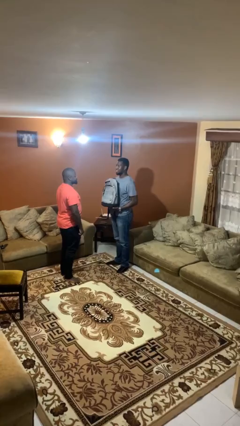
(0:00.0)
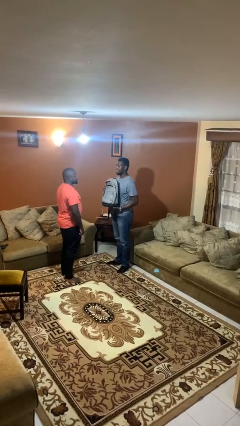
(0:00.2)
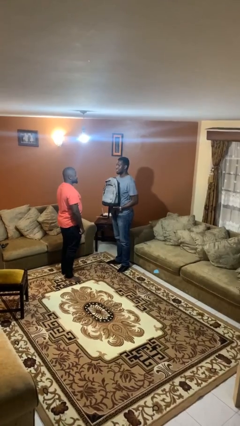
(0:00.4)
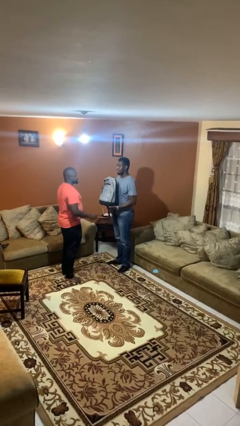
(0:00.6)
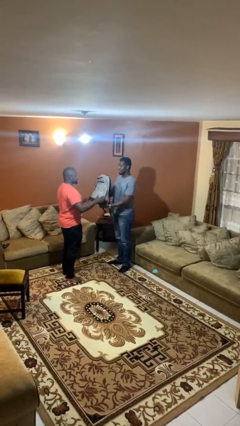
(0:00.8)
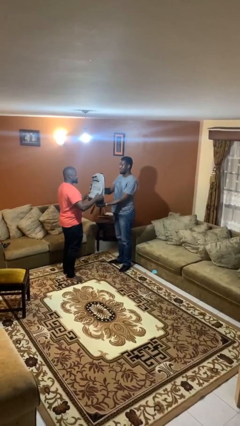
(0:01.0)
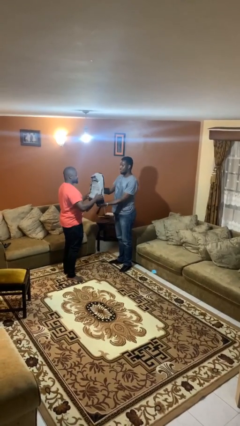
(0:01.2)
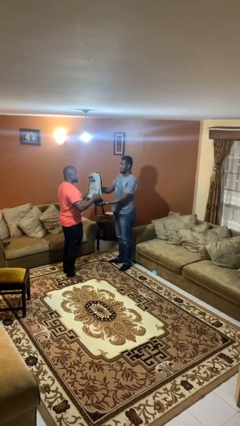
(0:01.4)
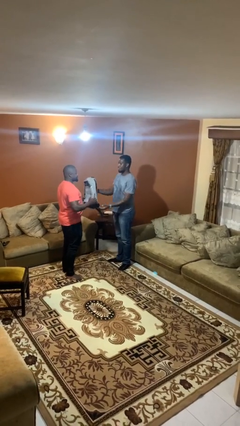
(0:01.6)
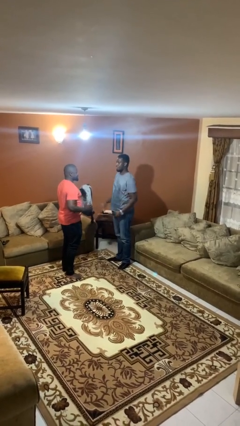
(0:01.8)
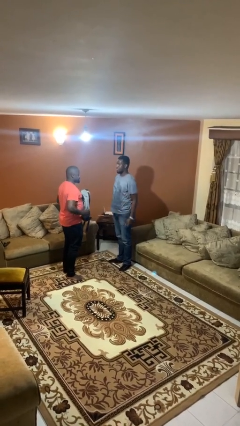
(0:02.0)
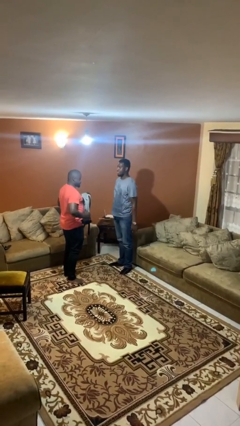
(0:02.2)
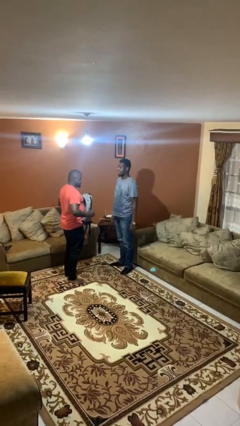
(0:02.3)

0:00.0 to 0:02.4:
person transfers object to person

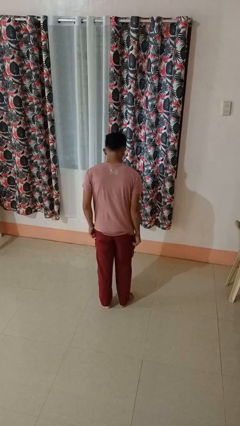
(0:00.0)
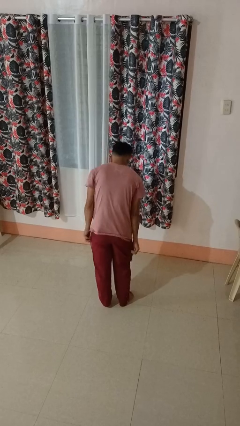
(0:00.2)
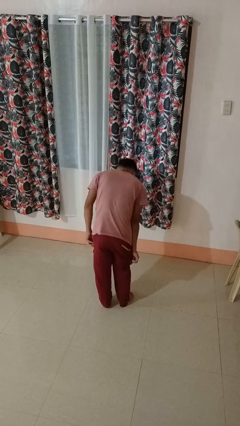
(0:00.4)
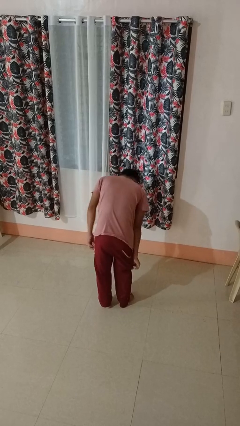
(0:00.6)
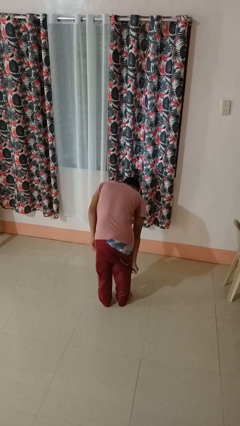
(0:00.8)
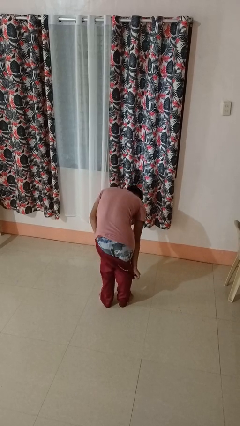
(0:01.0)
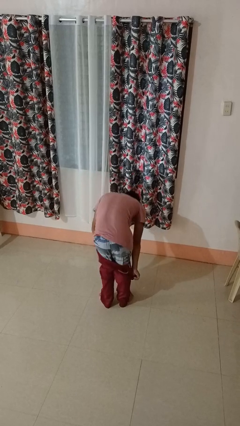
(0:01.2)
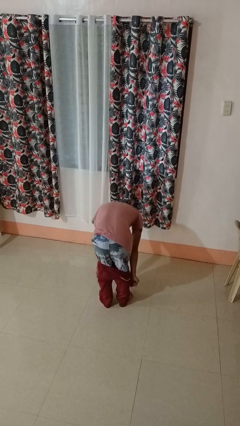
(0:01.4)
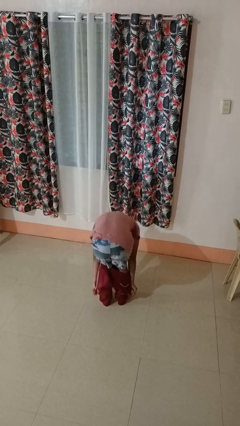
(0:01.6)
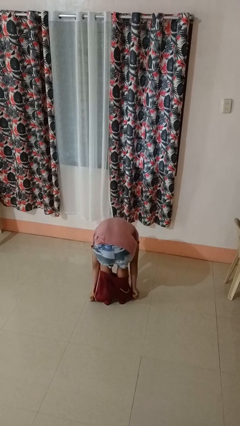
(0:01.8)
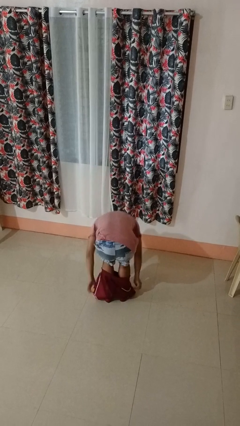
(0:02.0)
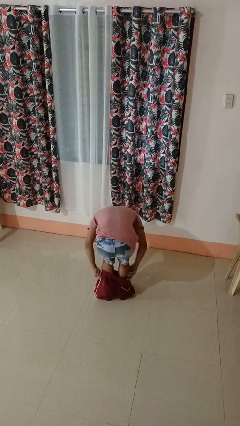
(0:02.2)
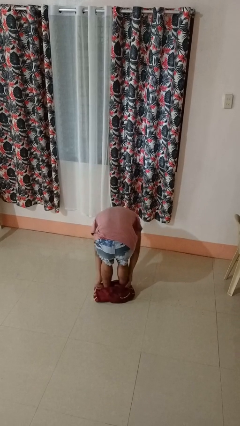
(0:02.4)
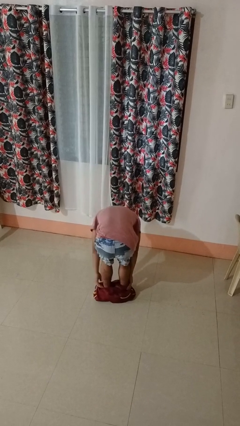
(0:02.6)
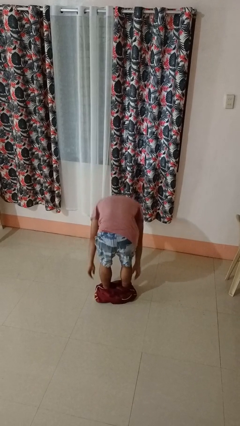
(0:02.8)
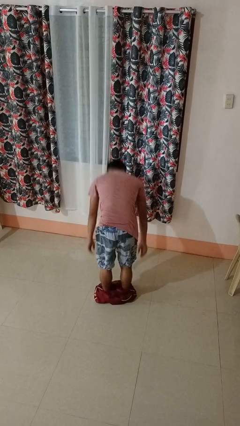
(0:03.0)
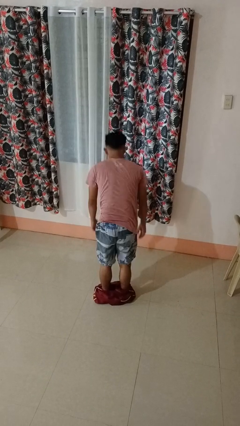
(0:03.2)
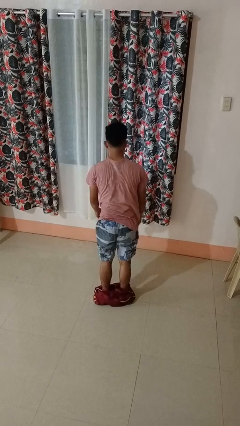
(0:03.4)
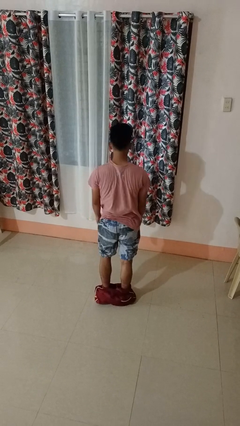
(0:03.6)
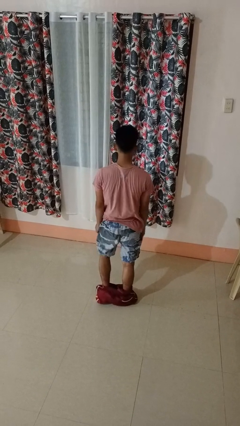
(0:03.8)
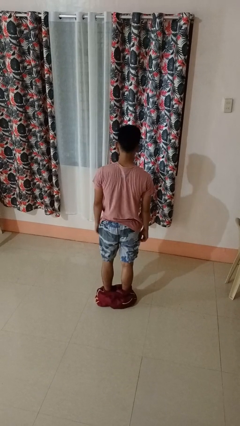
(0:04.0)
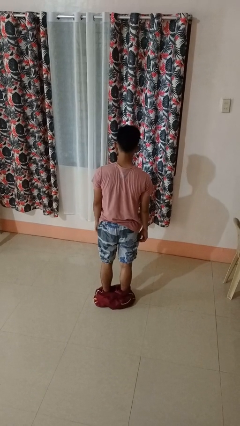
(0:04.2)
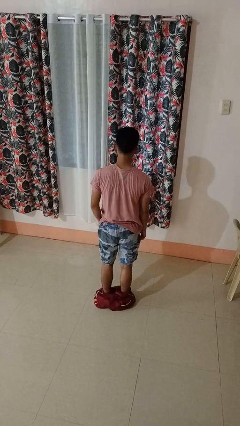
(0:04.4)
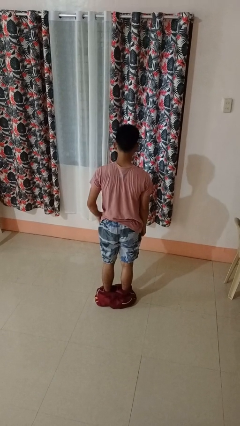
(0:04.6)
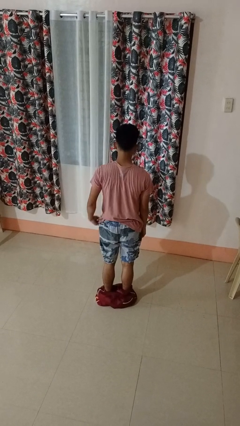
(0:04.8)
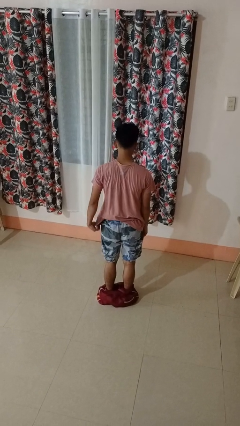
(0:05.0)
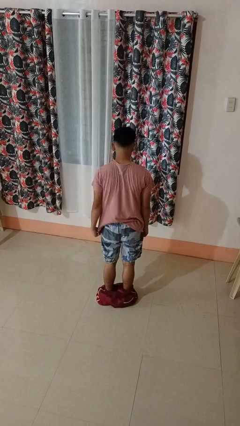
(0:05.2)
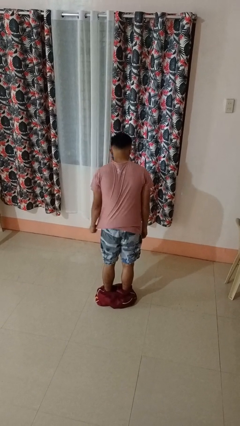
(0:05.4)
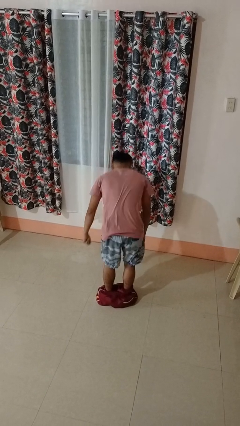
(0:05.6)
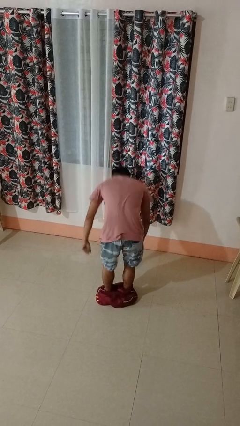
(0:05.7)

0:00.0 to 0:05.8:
person takes off pants

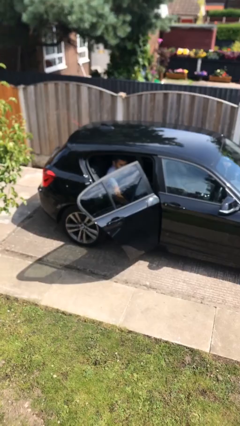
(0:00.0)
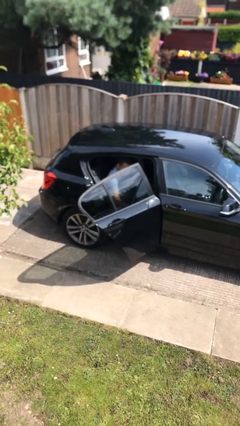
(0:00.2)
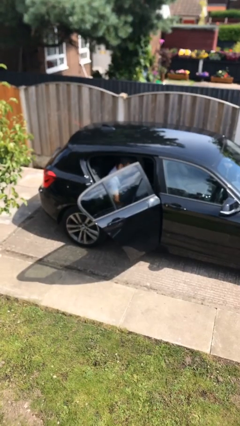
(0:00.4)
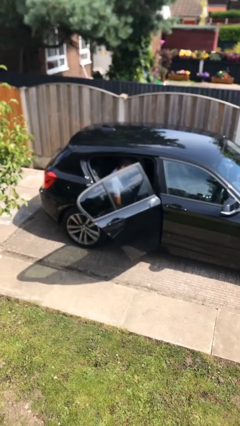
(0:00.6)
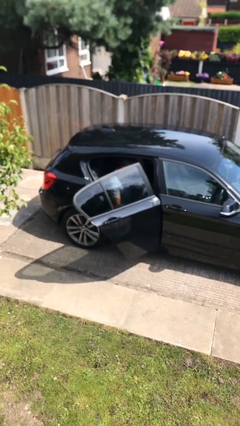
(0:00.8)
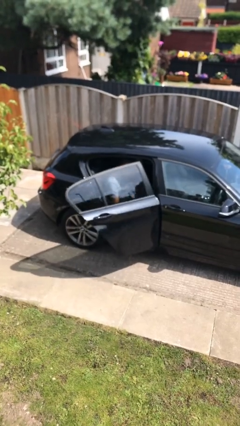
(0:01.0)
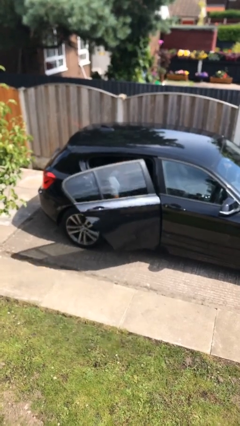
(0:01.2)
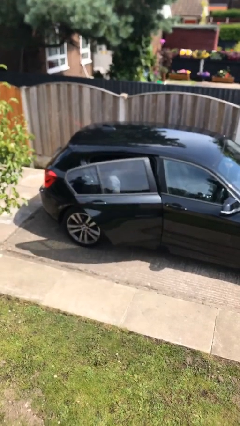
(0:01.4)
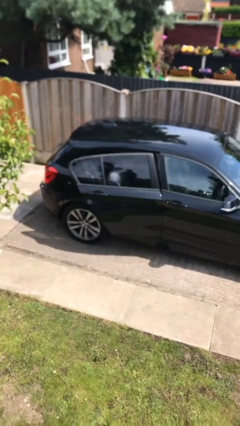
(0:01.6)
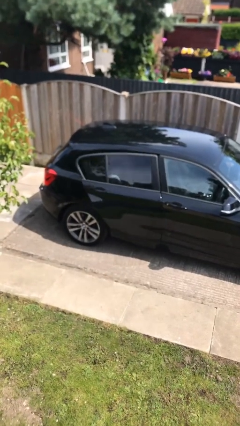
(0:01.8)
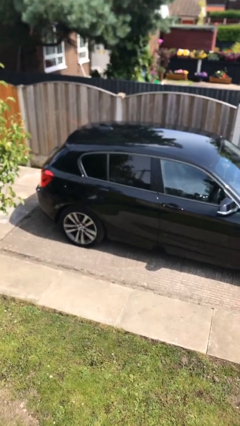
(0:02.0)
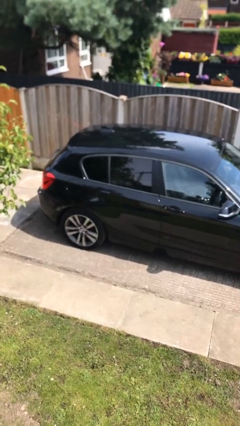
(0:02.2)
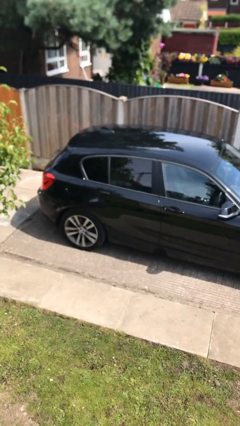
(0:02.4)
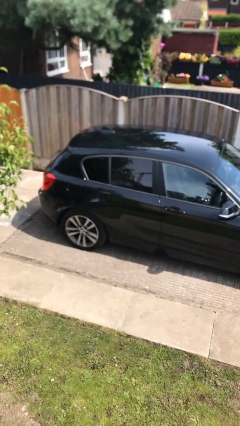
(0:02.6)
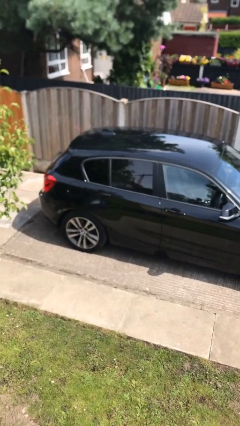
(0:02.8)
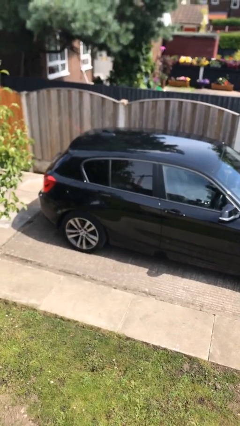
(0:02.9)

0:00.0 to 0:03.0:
person closes car door

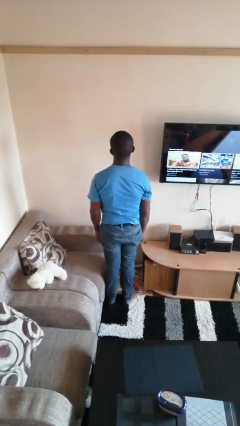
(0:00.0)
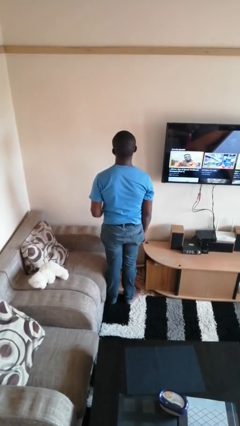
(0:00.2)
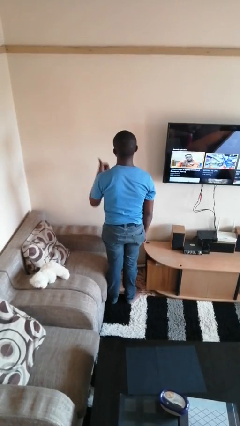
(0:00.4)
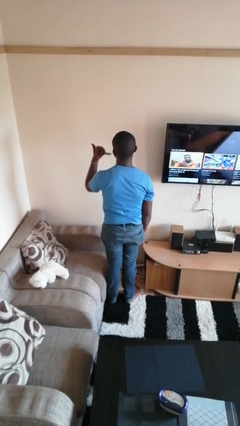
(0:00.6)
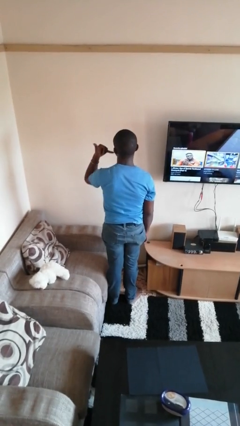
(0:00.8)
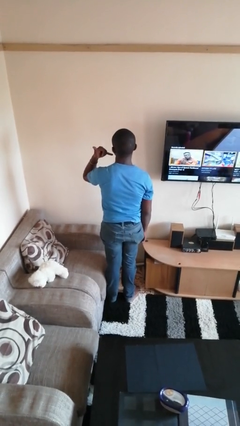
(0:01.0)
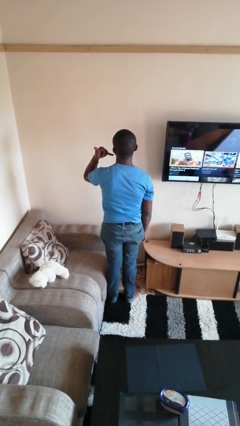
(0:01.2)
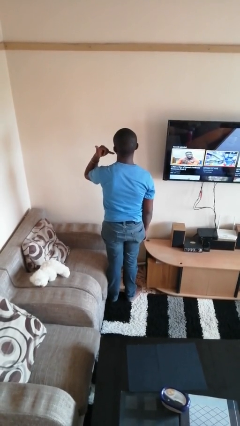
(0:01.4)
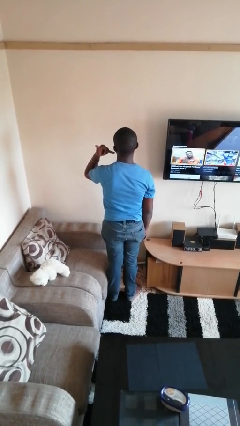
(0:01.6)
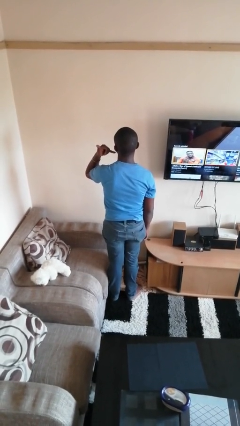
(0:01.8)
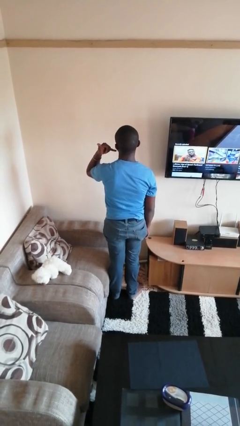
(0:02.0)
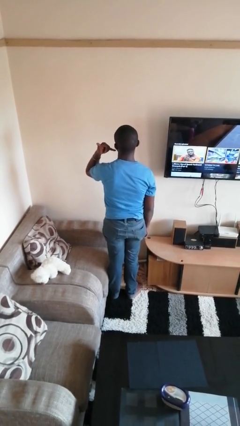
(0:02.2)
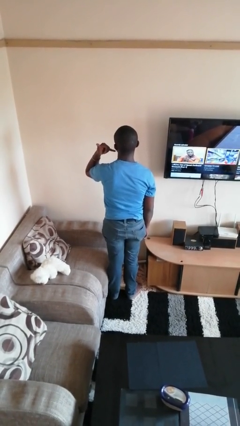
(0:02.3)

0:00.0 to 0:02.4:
person gestures call me

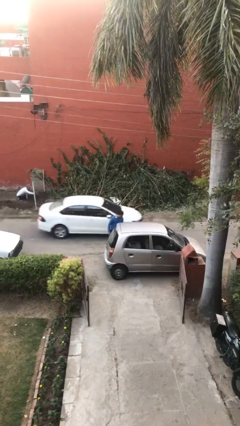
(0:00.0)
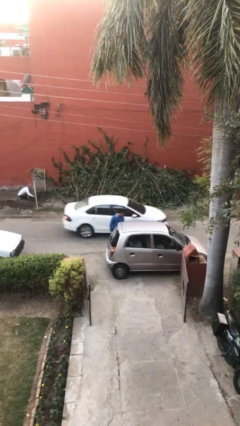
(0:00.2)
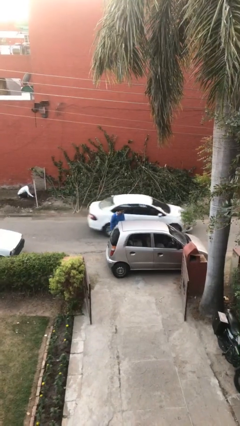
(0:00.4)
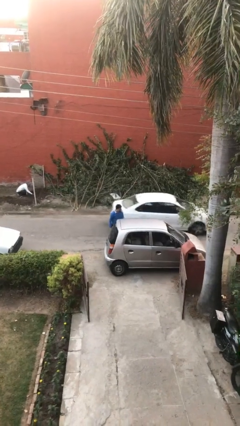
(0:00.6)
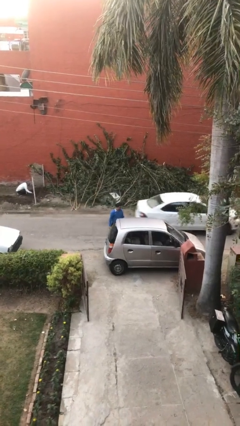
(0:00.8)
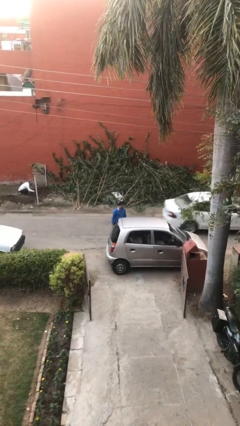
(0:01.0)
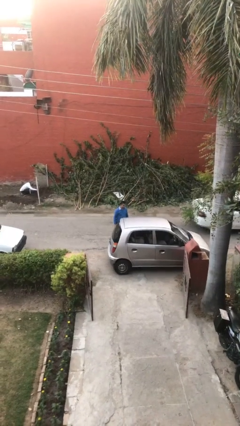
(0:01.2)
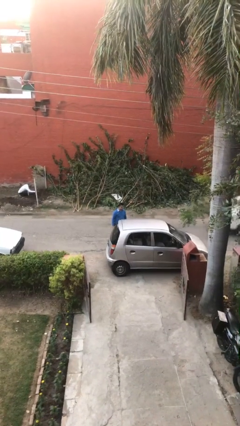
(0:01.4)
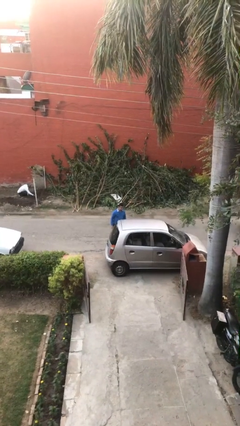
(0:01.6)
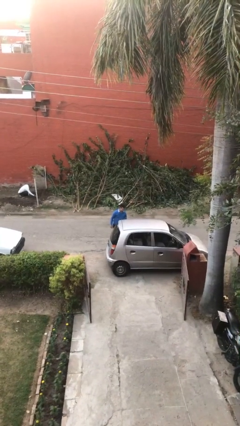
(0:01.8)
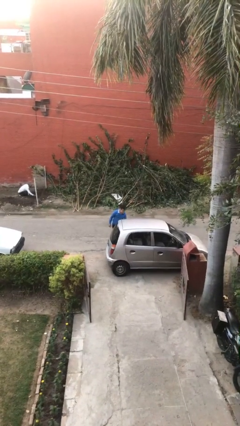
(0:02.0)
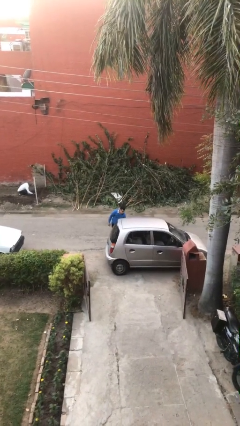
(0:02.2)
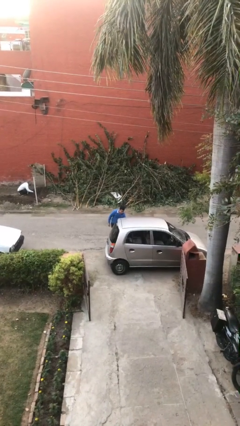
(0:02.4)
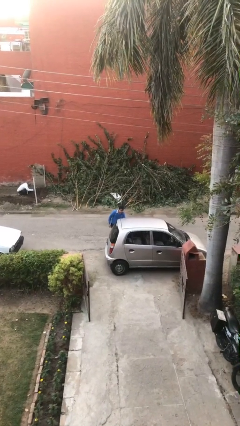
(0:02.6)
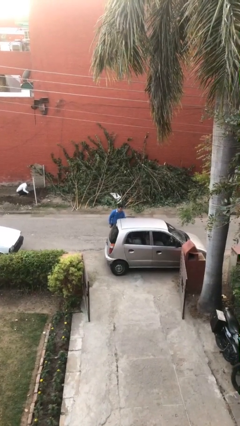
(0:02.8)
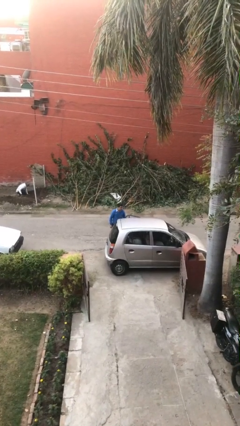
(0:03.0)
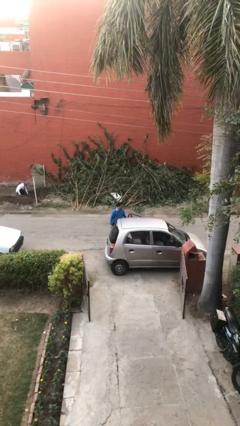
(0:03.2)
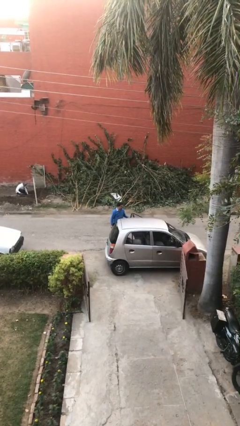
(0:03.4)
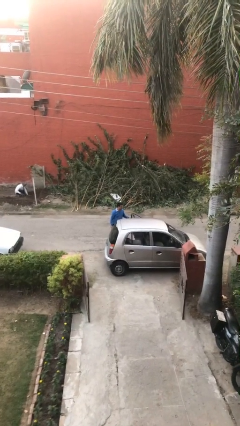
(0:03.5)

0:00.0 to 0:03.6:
person opens car door

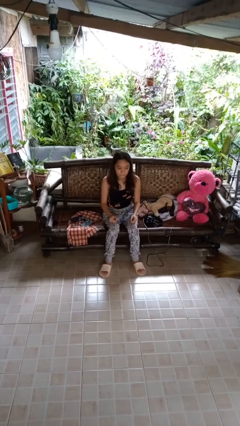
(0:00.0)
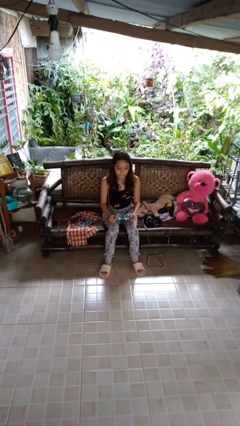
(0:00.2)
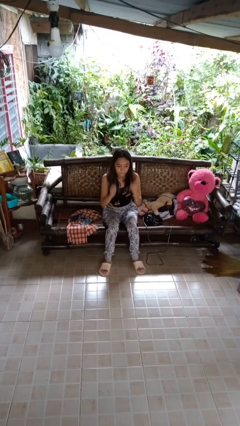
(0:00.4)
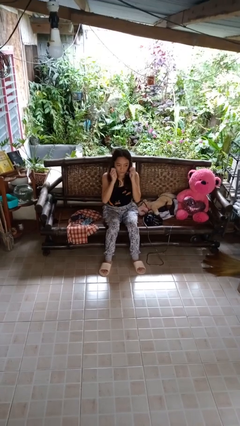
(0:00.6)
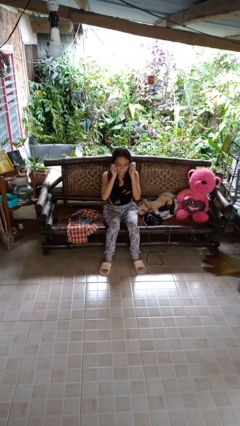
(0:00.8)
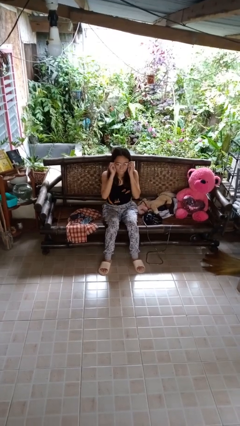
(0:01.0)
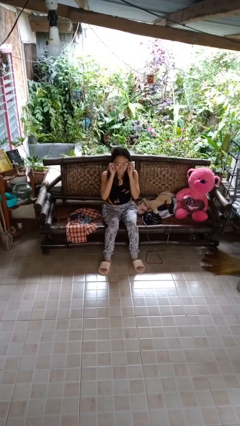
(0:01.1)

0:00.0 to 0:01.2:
person puts on glasses
